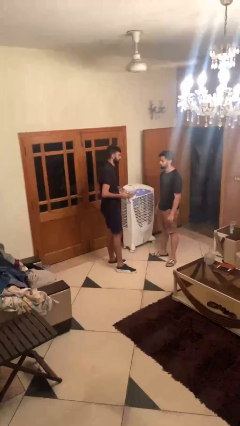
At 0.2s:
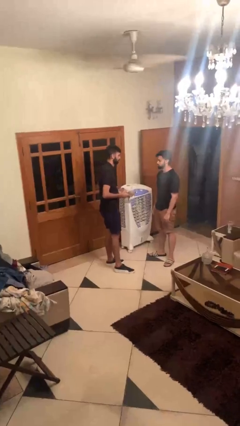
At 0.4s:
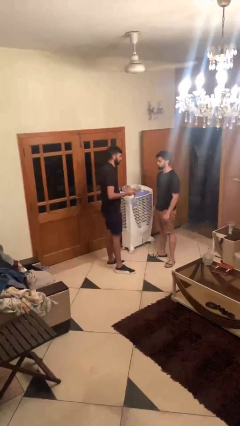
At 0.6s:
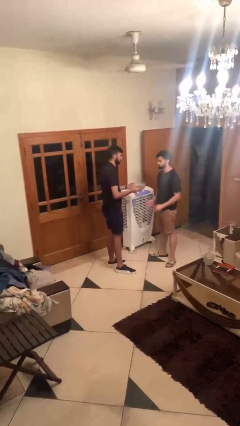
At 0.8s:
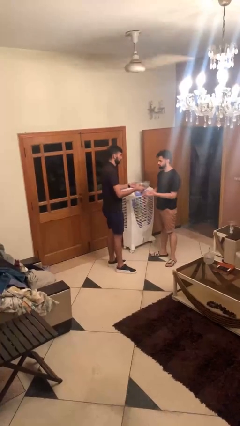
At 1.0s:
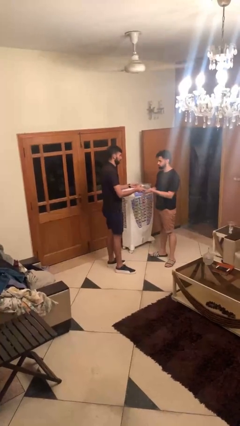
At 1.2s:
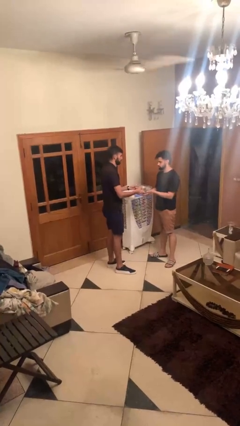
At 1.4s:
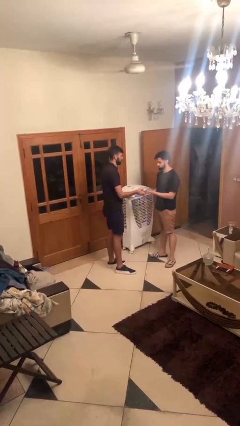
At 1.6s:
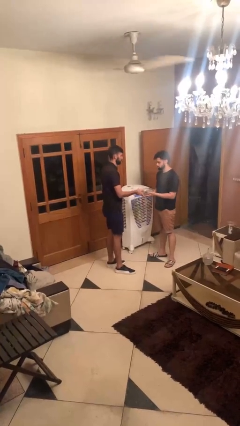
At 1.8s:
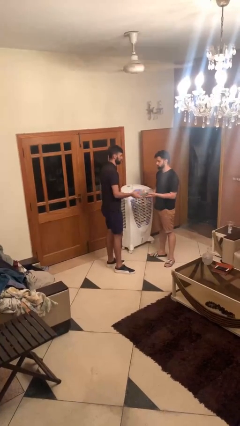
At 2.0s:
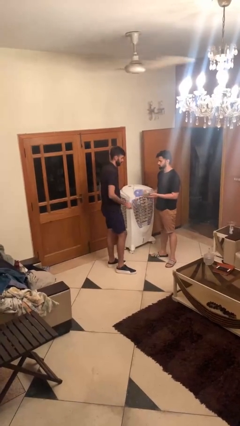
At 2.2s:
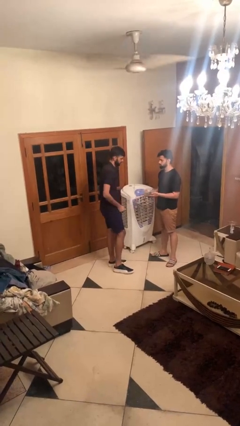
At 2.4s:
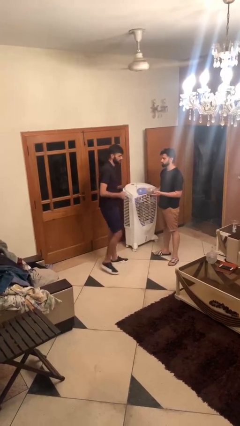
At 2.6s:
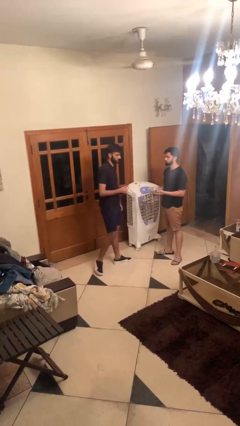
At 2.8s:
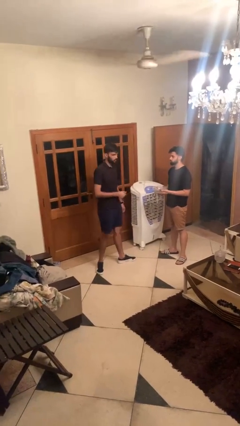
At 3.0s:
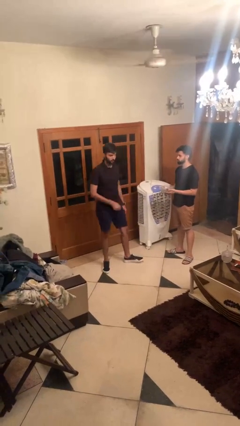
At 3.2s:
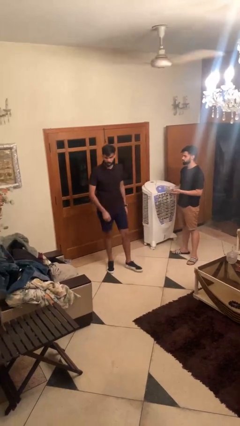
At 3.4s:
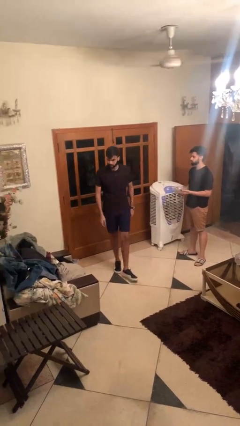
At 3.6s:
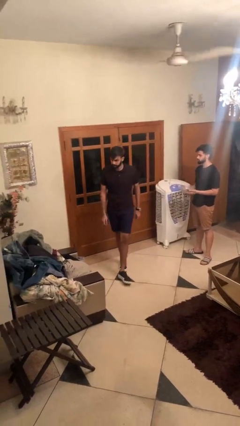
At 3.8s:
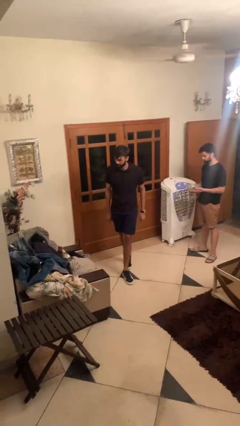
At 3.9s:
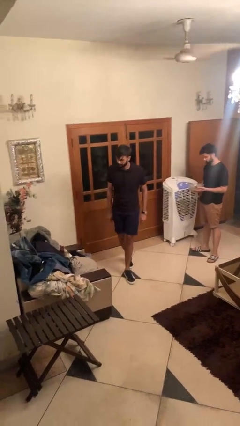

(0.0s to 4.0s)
person transfers object to person

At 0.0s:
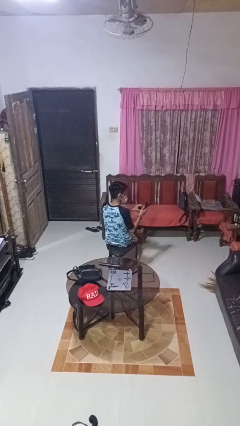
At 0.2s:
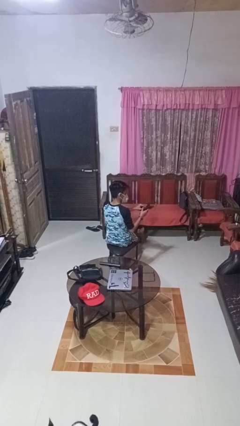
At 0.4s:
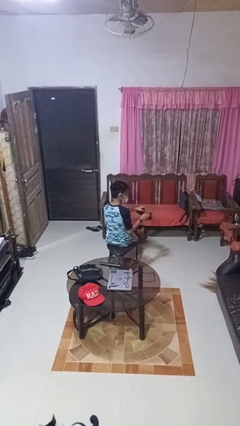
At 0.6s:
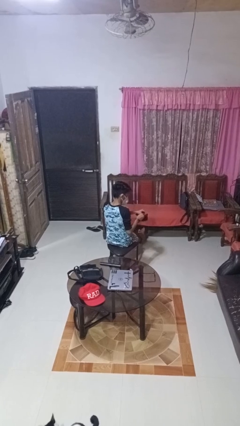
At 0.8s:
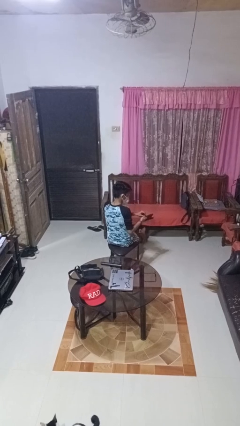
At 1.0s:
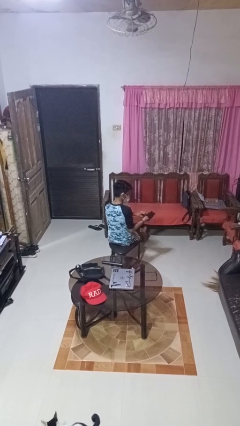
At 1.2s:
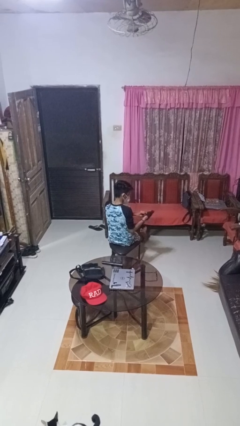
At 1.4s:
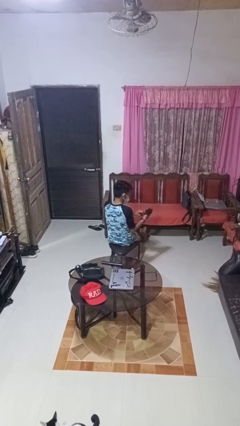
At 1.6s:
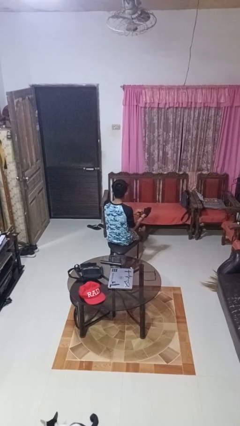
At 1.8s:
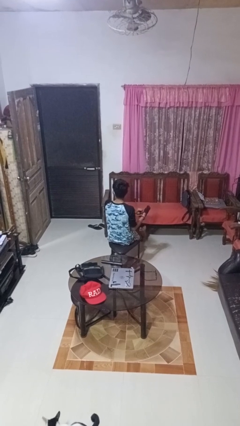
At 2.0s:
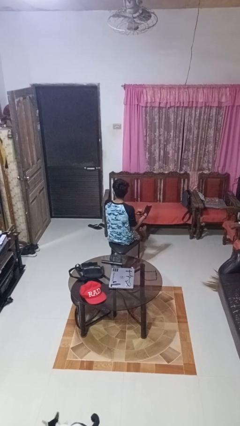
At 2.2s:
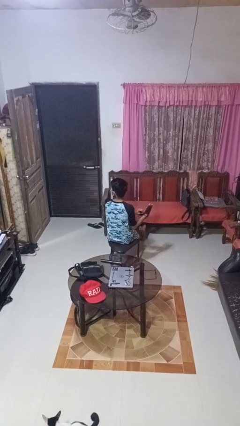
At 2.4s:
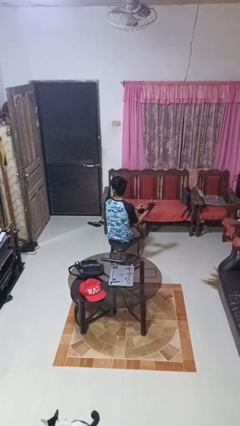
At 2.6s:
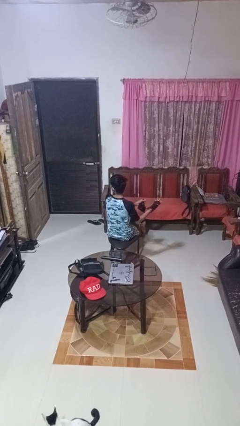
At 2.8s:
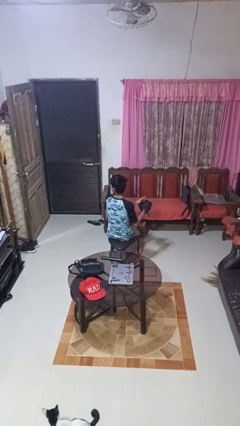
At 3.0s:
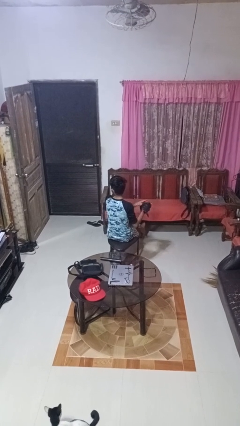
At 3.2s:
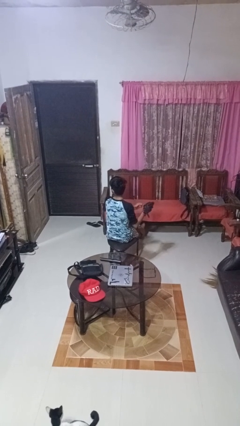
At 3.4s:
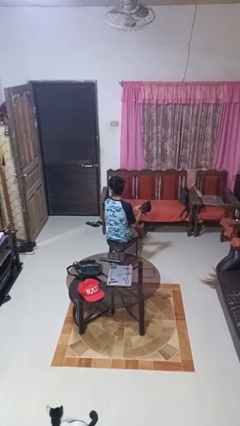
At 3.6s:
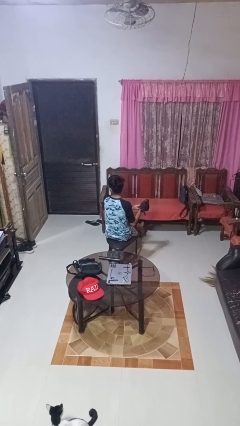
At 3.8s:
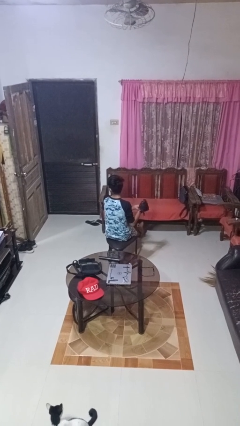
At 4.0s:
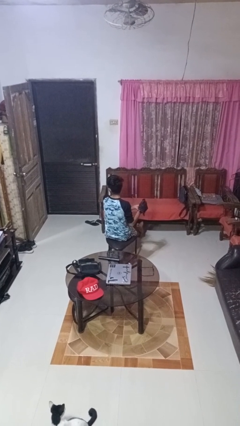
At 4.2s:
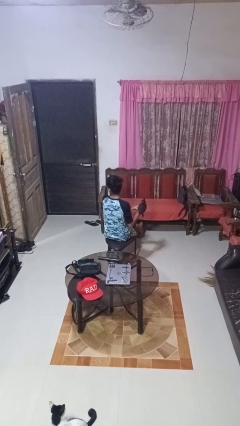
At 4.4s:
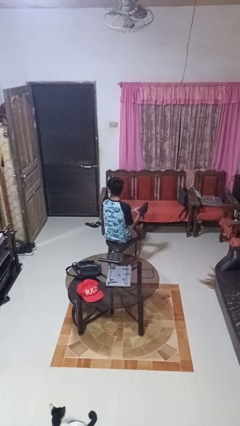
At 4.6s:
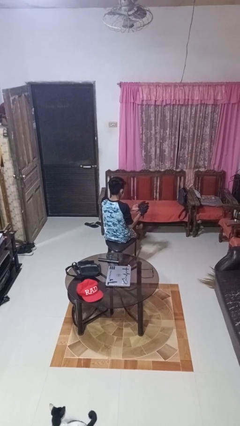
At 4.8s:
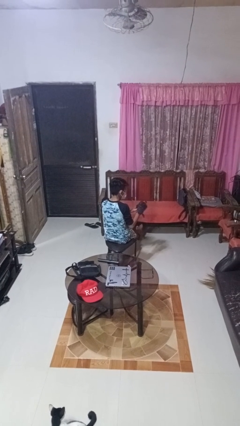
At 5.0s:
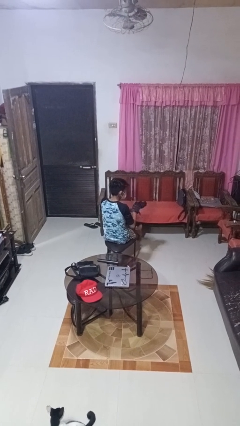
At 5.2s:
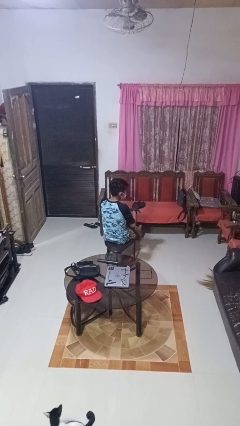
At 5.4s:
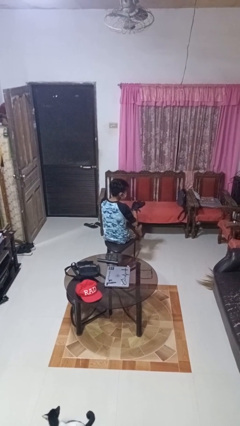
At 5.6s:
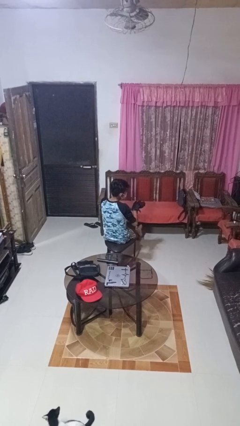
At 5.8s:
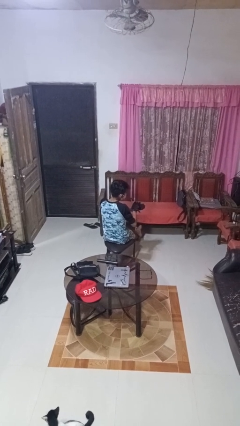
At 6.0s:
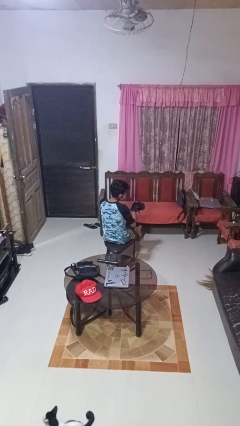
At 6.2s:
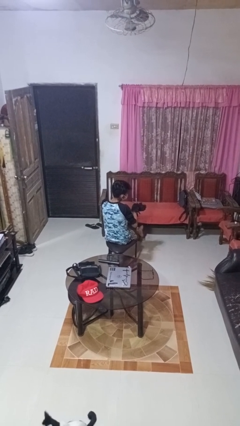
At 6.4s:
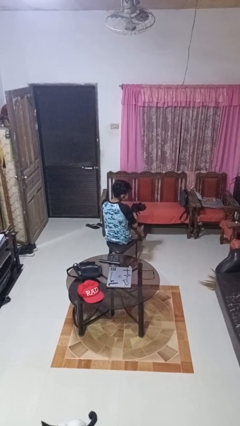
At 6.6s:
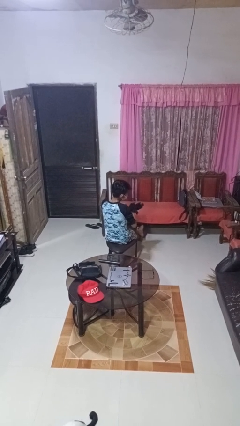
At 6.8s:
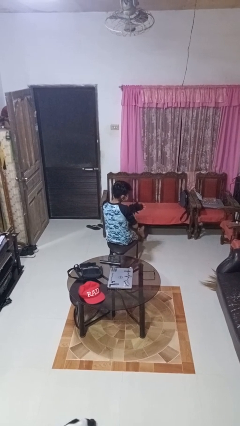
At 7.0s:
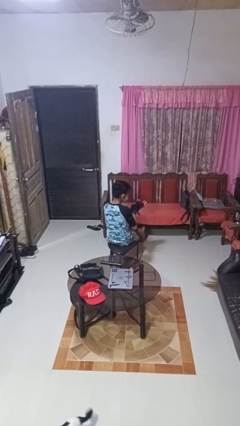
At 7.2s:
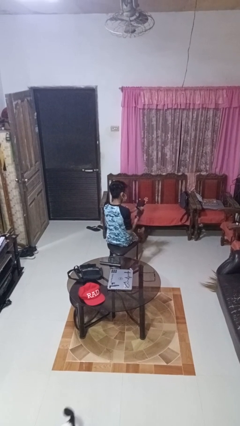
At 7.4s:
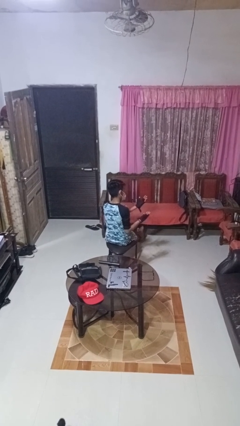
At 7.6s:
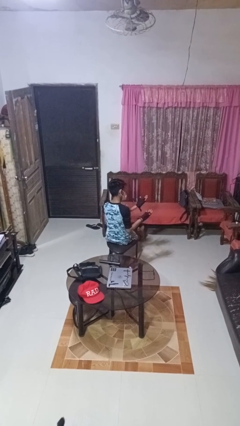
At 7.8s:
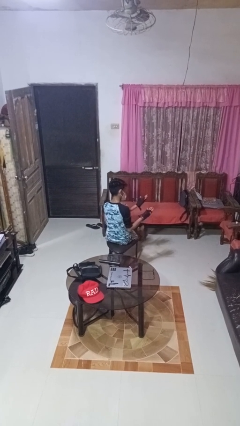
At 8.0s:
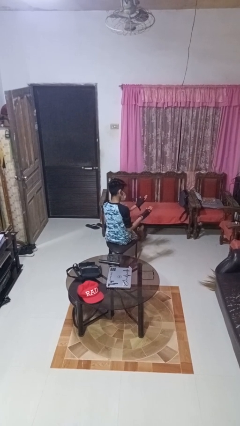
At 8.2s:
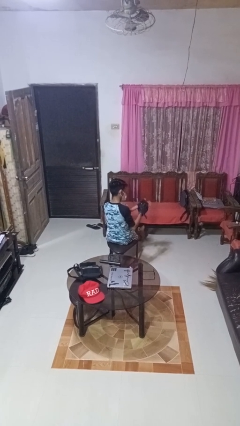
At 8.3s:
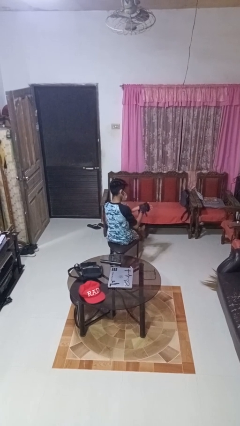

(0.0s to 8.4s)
person puts on gloves

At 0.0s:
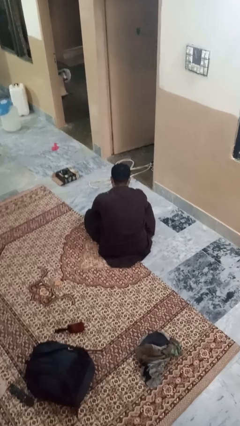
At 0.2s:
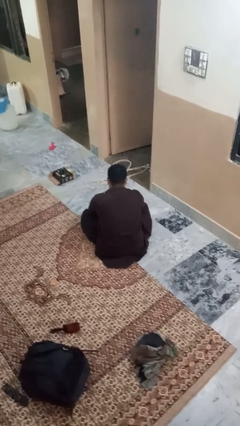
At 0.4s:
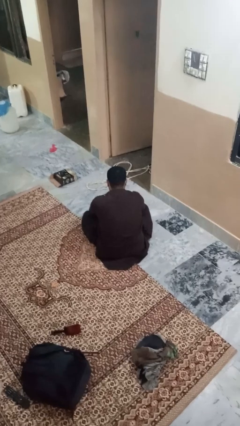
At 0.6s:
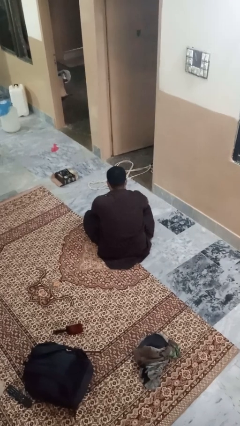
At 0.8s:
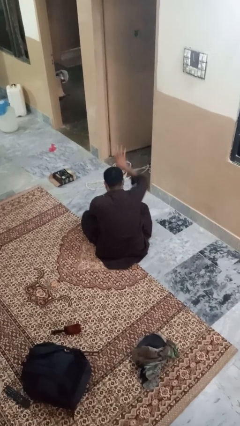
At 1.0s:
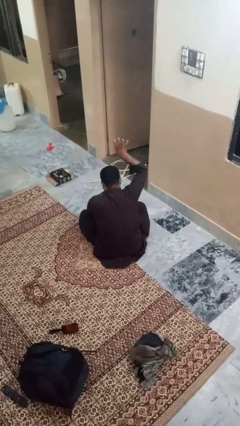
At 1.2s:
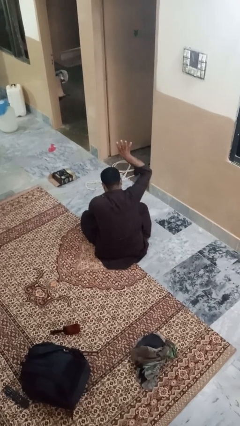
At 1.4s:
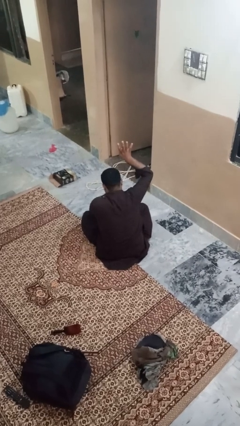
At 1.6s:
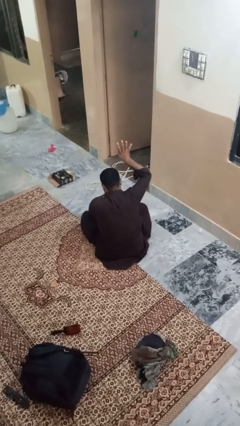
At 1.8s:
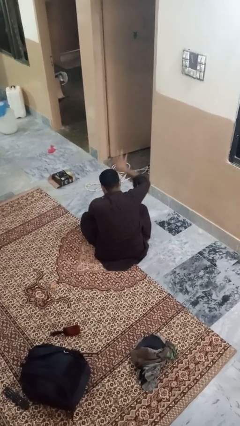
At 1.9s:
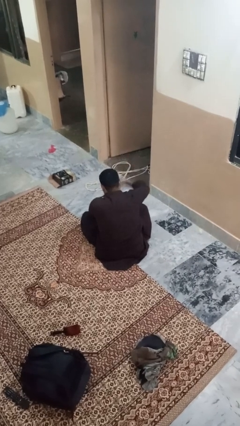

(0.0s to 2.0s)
person gestures number four

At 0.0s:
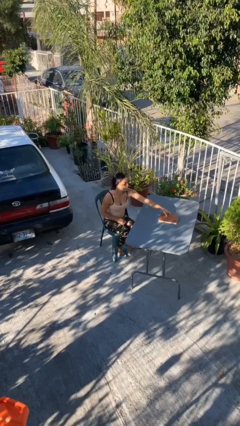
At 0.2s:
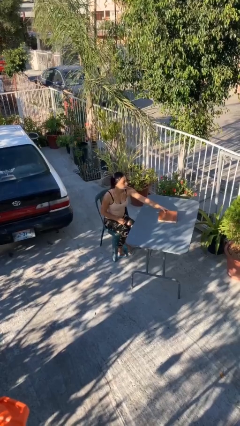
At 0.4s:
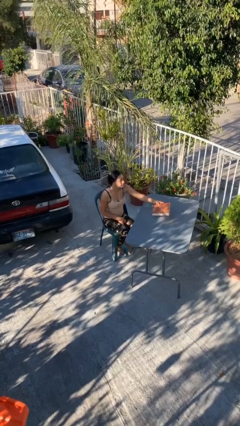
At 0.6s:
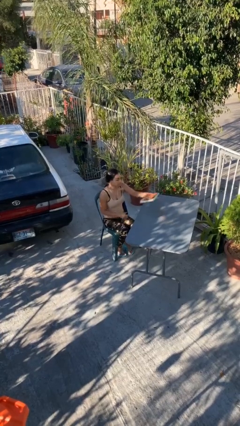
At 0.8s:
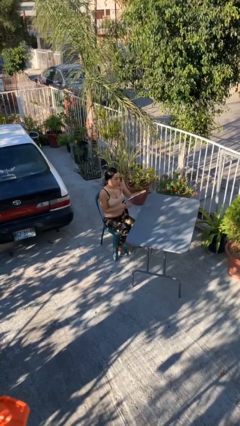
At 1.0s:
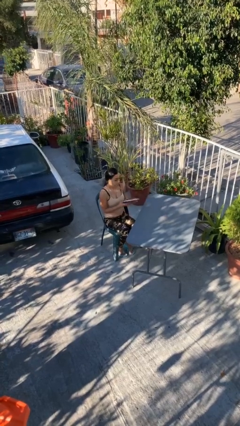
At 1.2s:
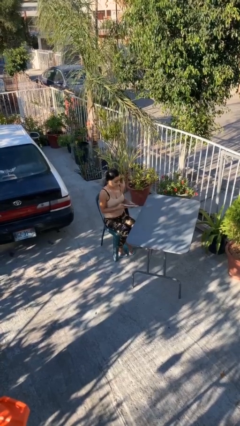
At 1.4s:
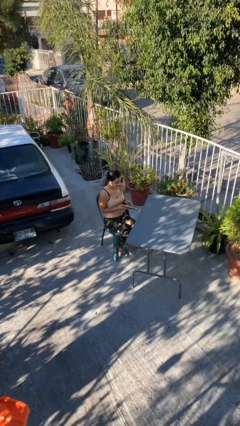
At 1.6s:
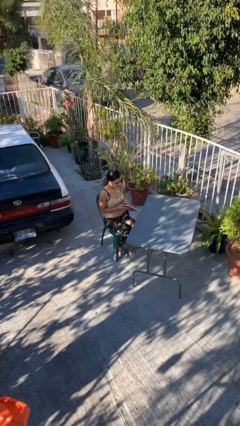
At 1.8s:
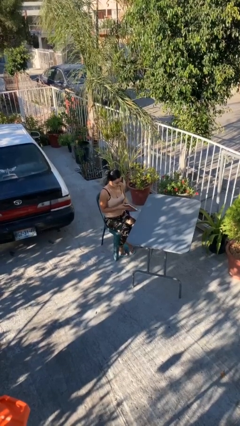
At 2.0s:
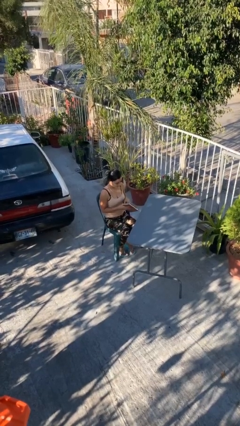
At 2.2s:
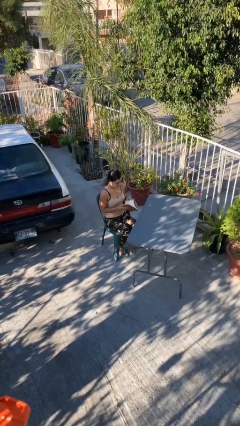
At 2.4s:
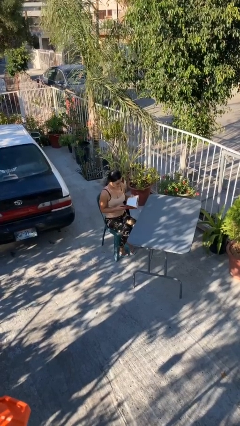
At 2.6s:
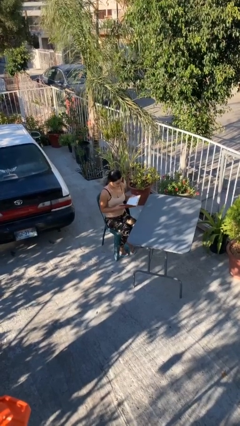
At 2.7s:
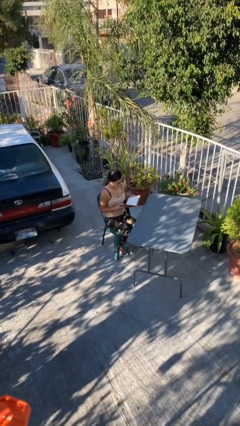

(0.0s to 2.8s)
person picks up object from table

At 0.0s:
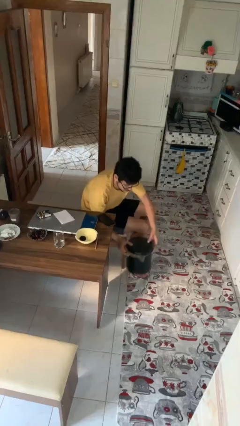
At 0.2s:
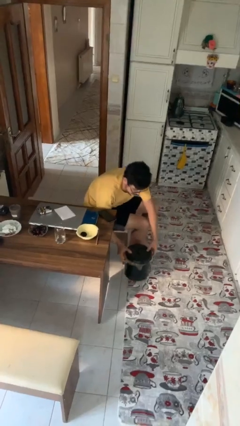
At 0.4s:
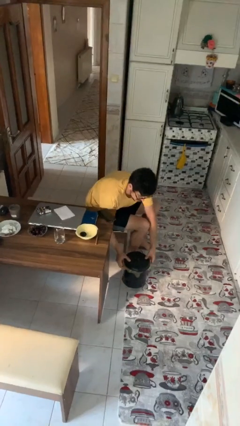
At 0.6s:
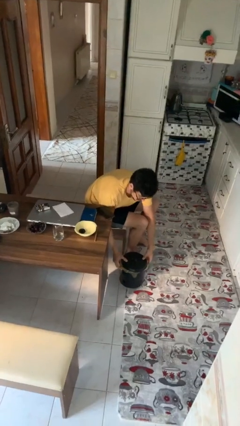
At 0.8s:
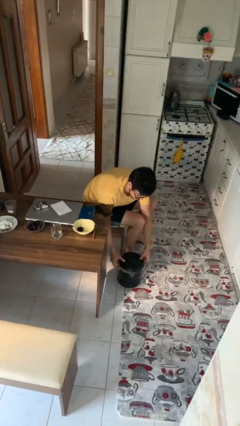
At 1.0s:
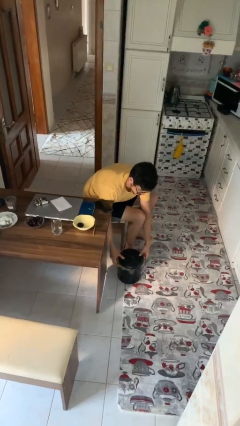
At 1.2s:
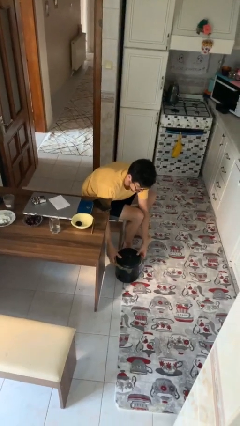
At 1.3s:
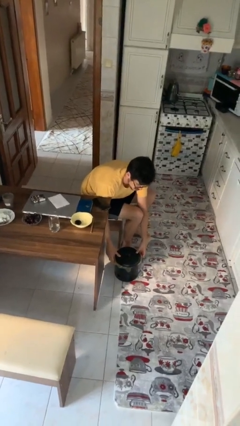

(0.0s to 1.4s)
person puts down object on floor
